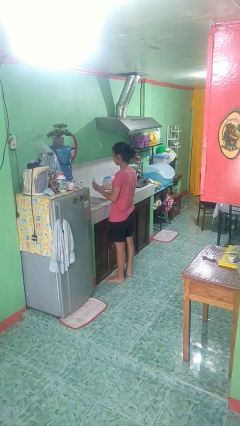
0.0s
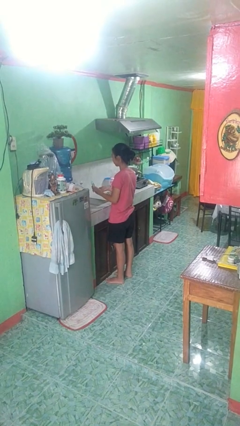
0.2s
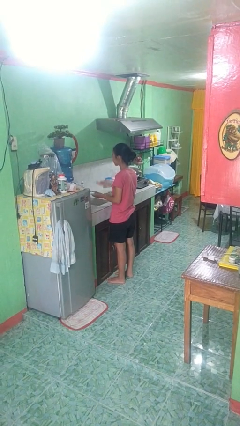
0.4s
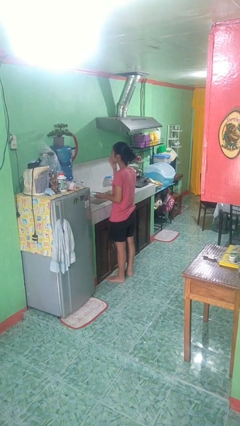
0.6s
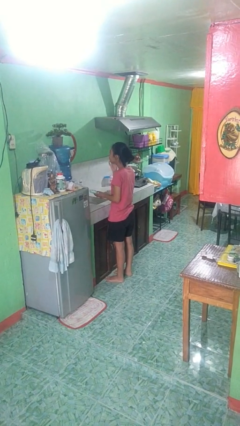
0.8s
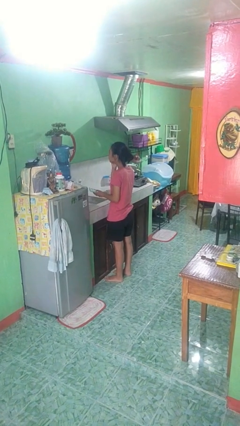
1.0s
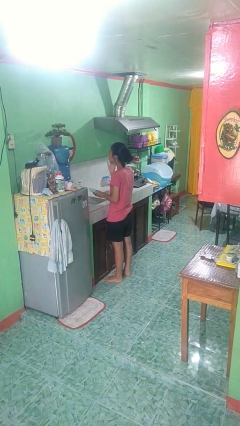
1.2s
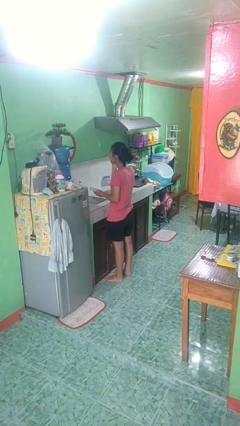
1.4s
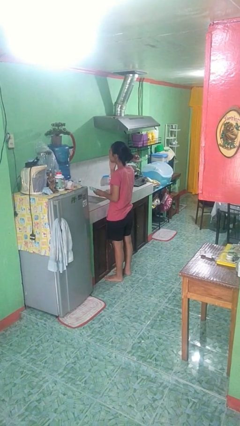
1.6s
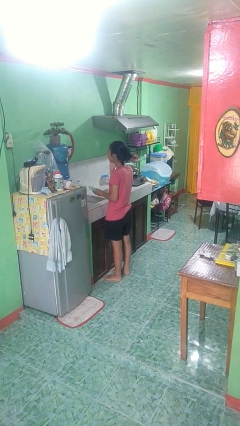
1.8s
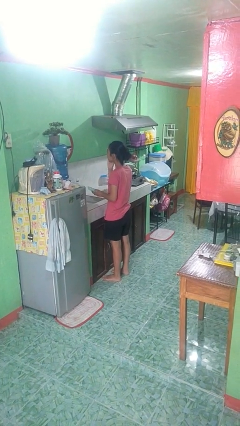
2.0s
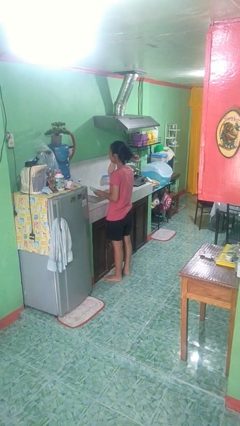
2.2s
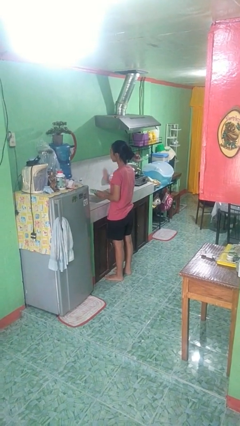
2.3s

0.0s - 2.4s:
person applies facial moisturizer

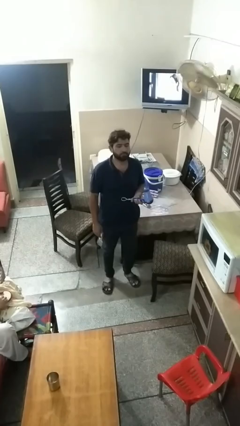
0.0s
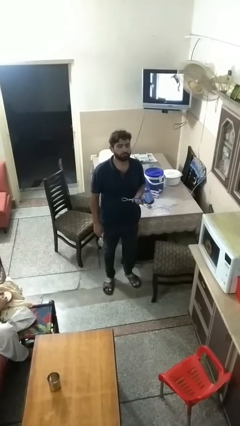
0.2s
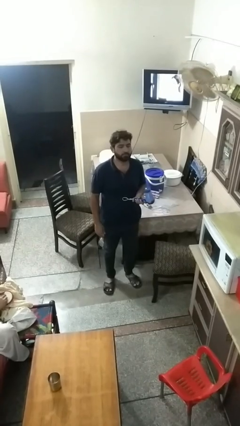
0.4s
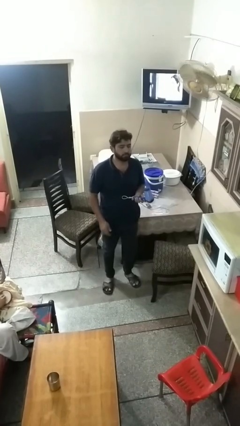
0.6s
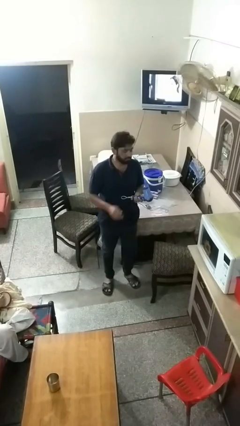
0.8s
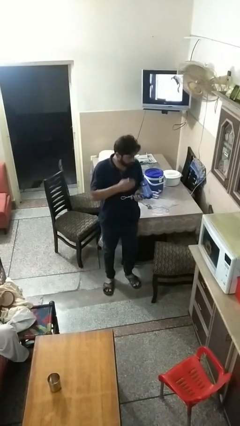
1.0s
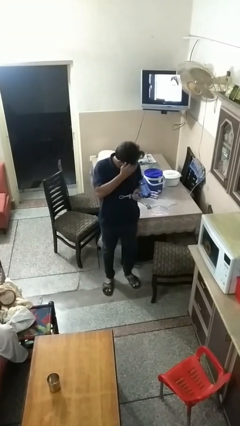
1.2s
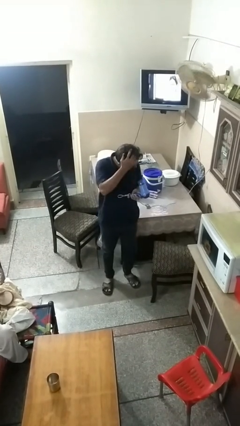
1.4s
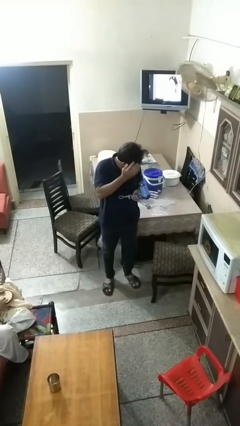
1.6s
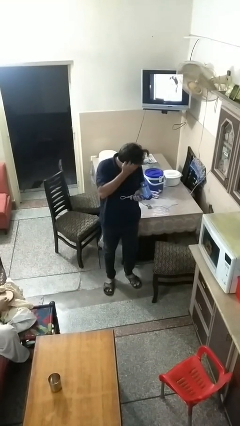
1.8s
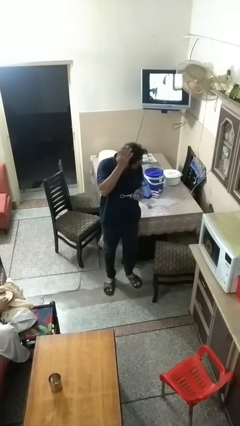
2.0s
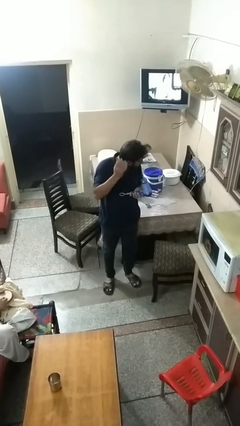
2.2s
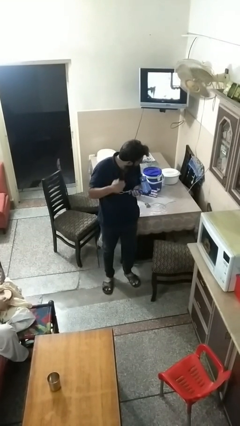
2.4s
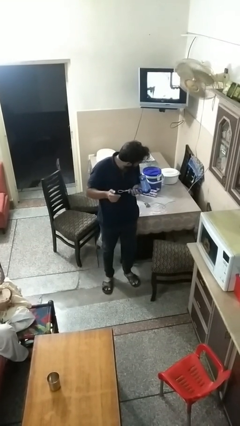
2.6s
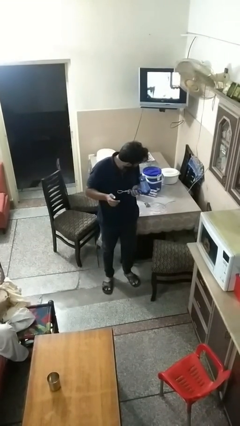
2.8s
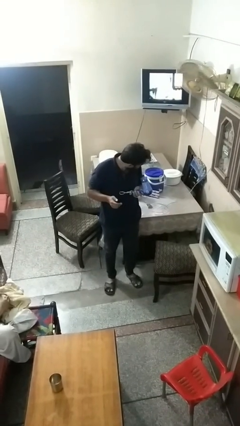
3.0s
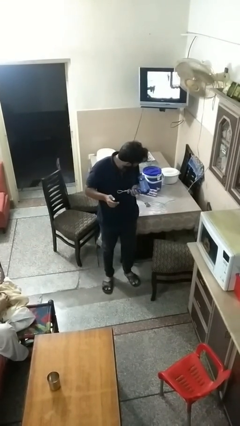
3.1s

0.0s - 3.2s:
person dries hair with hairdryer

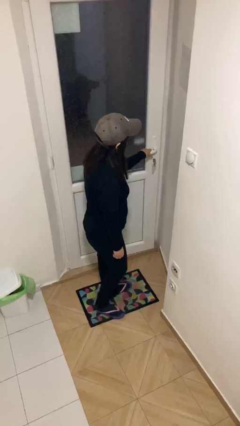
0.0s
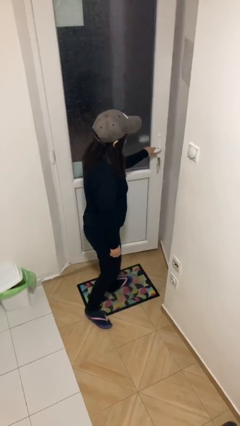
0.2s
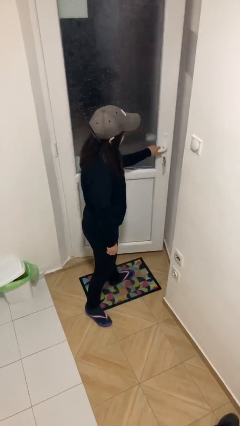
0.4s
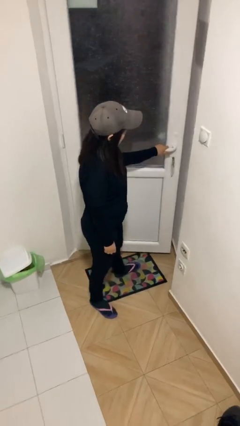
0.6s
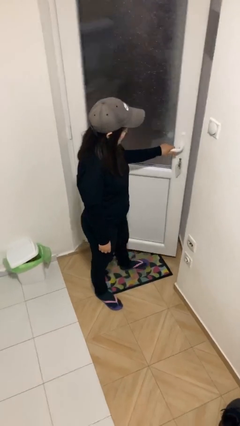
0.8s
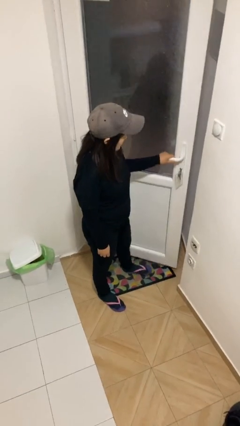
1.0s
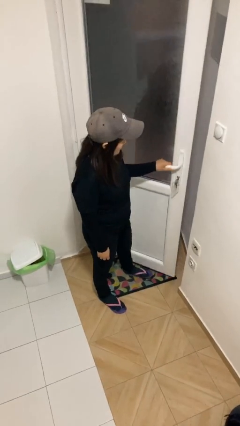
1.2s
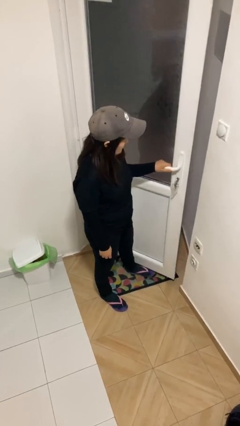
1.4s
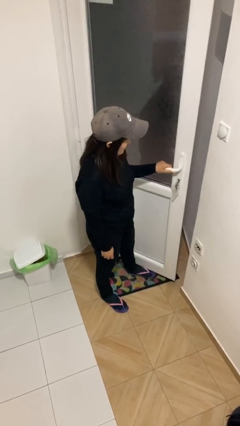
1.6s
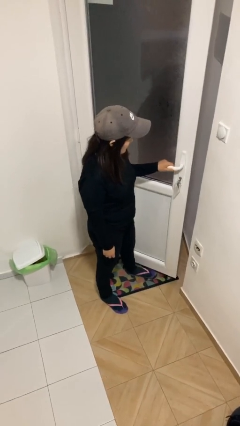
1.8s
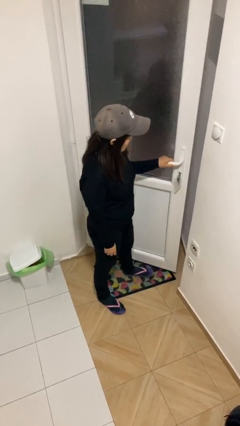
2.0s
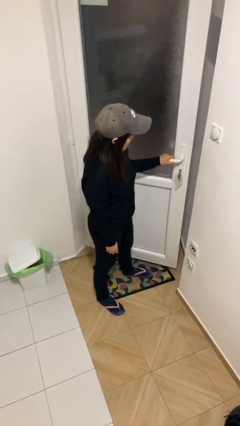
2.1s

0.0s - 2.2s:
person opens facility door

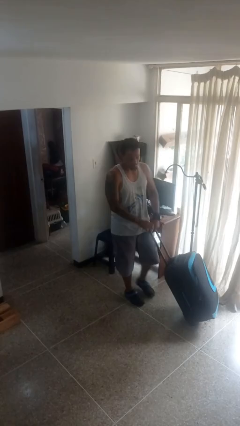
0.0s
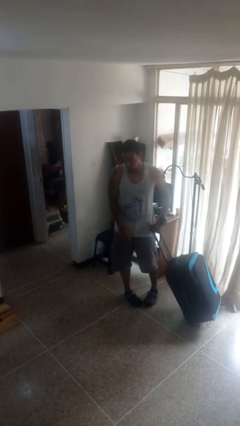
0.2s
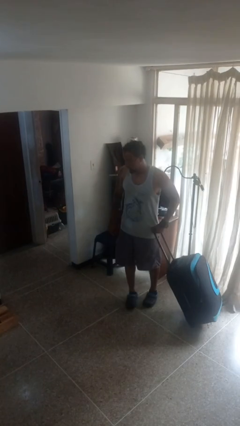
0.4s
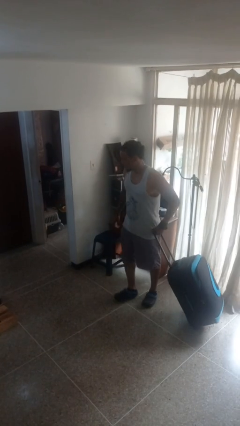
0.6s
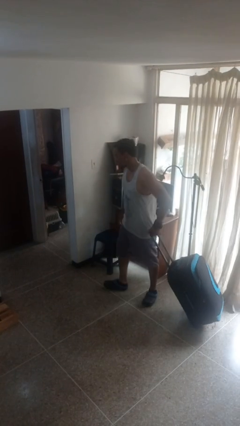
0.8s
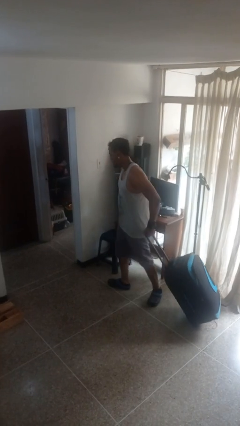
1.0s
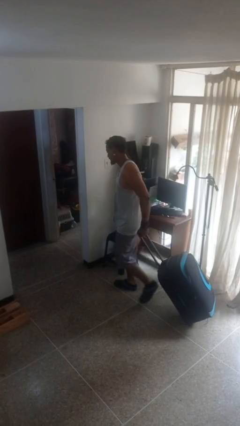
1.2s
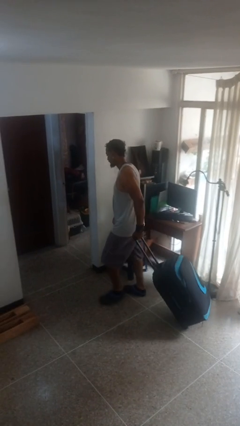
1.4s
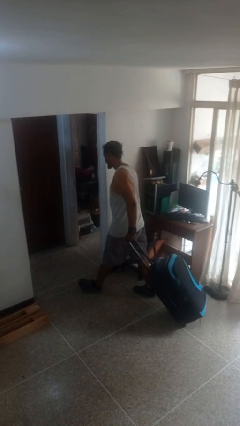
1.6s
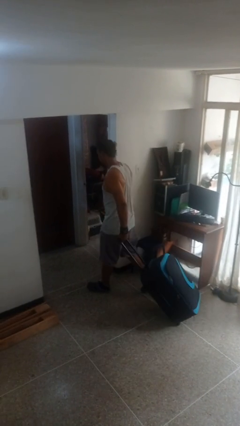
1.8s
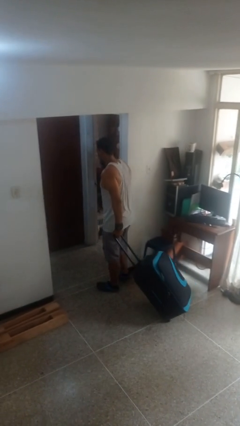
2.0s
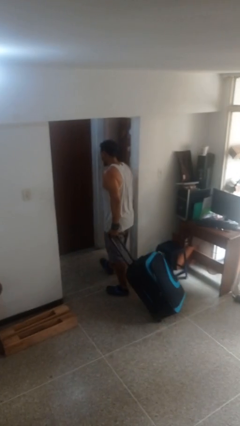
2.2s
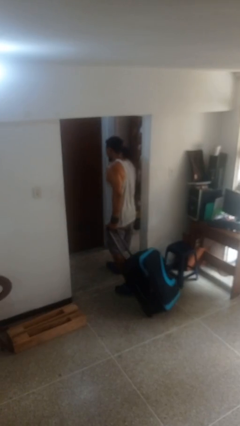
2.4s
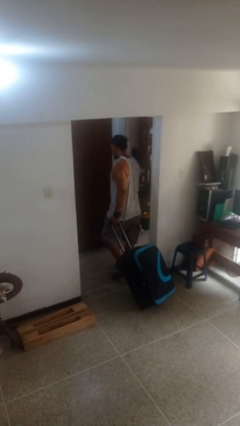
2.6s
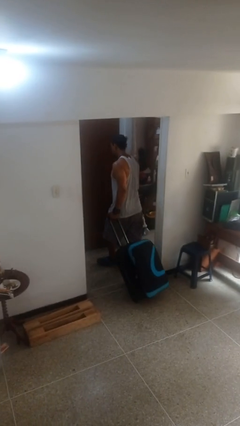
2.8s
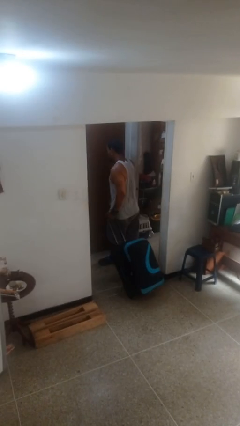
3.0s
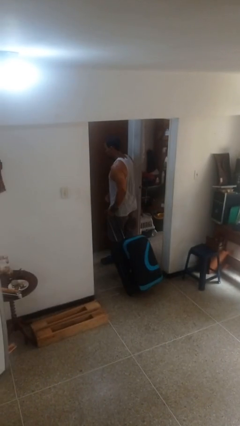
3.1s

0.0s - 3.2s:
person pulls wheeled cart

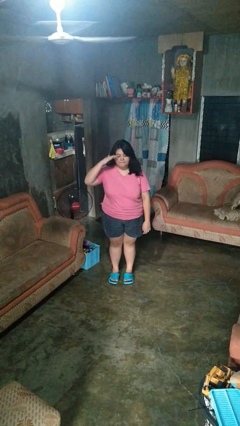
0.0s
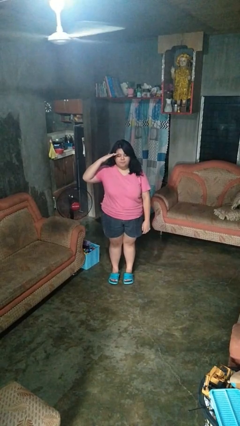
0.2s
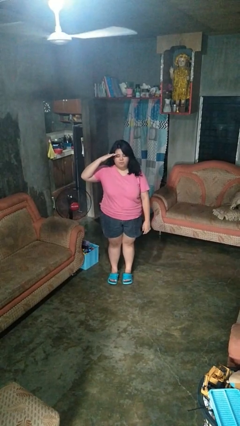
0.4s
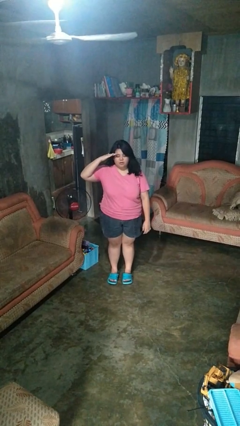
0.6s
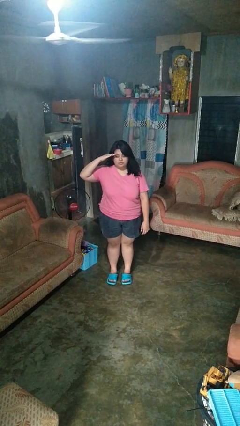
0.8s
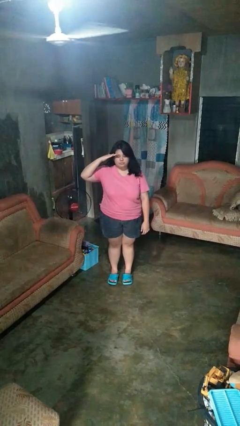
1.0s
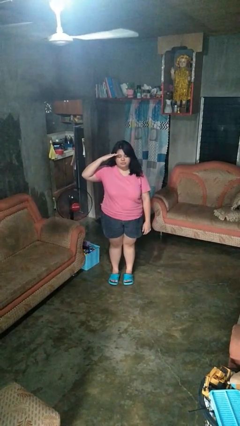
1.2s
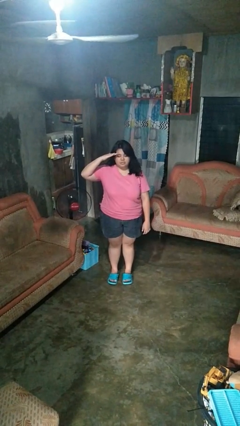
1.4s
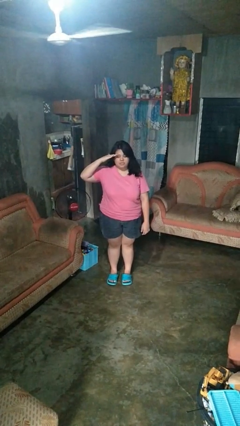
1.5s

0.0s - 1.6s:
person salutes

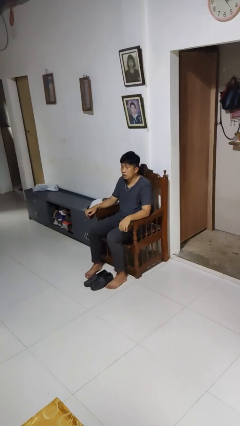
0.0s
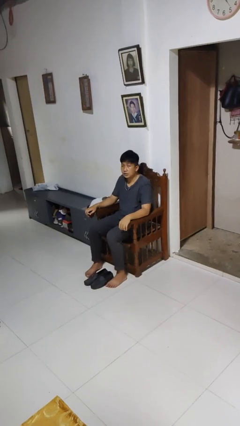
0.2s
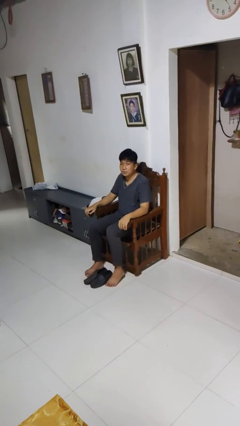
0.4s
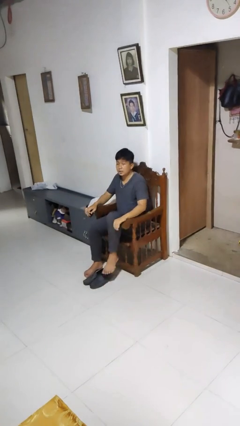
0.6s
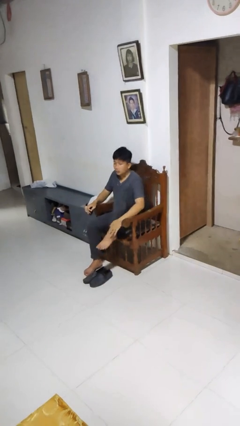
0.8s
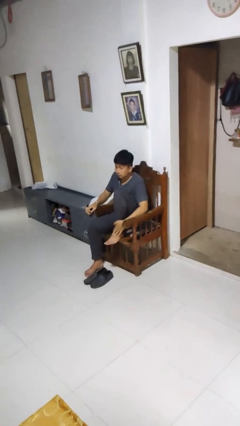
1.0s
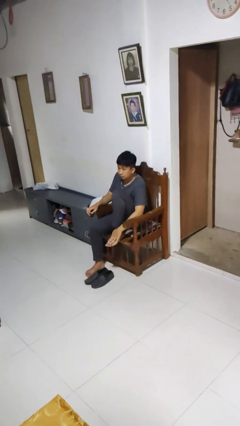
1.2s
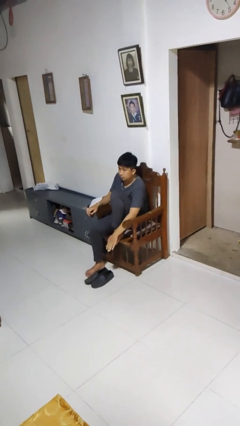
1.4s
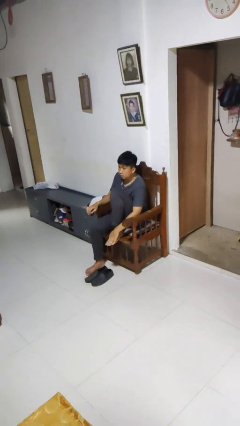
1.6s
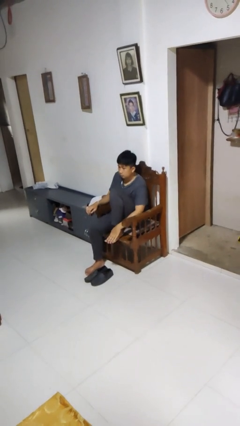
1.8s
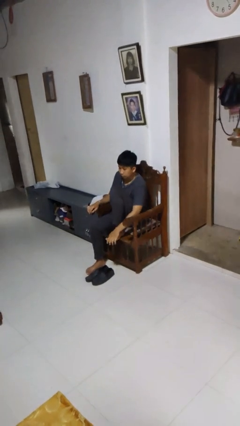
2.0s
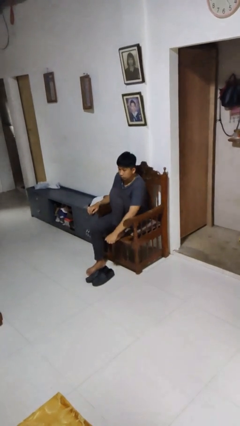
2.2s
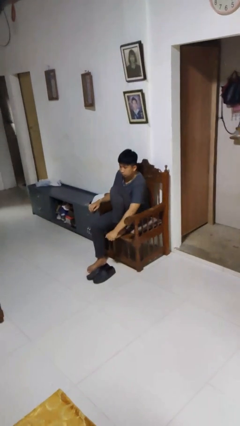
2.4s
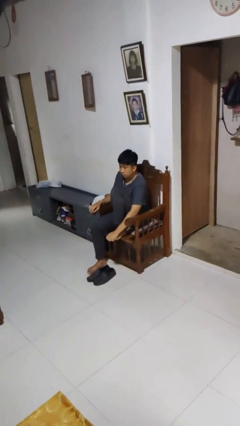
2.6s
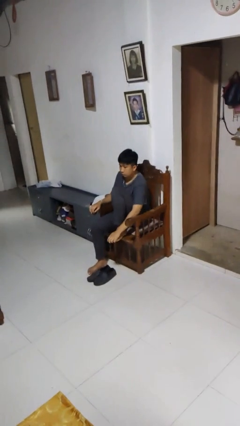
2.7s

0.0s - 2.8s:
person rubs foot

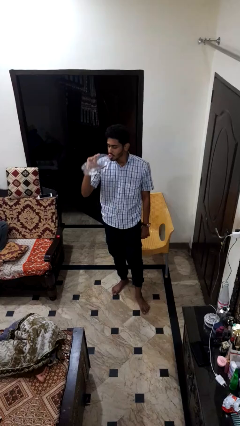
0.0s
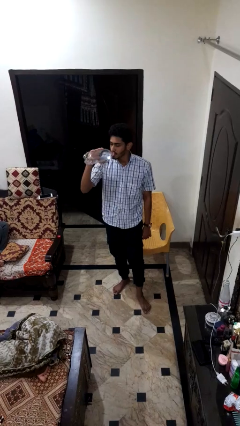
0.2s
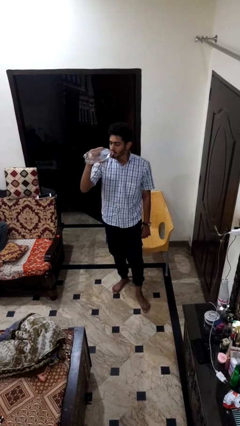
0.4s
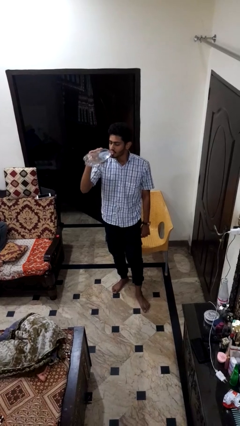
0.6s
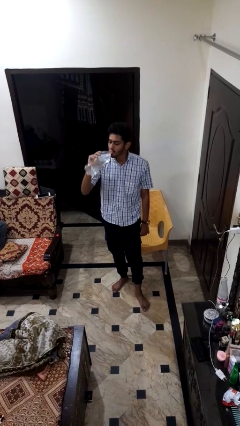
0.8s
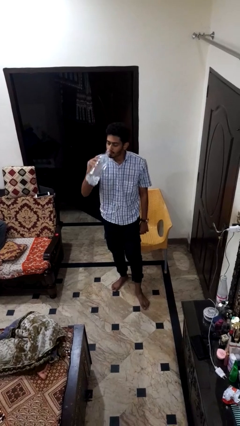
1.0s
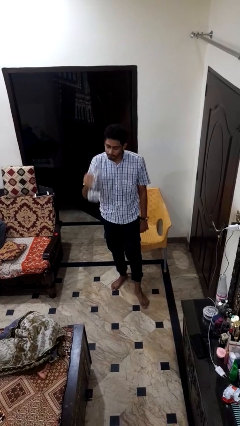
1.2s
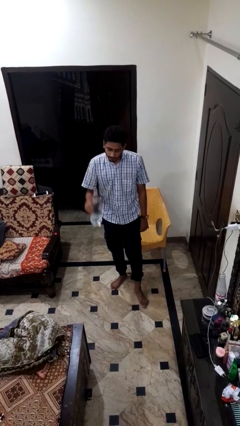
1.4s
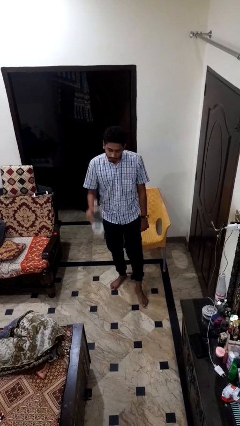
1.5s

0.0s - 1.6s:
person drinks from bottle
